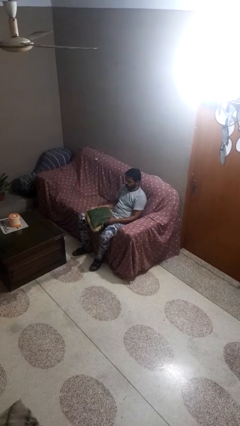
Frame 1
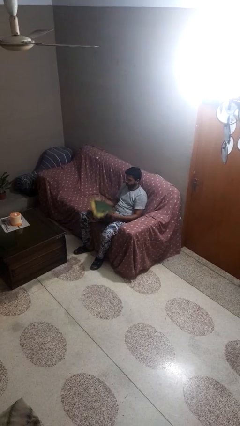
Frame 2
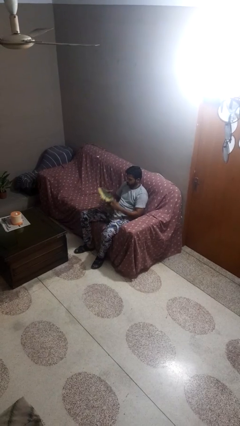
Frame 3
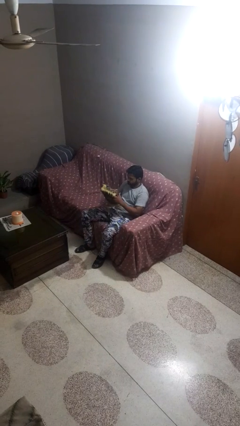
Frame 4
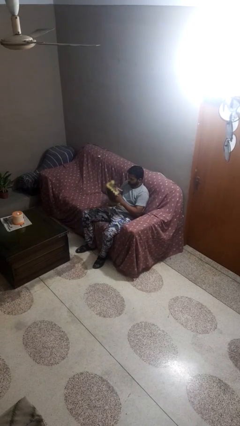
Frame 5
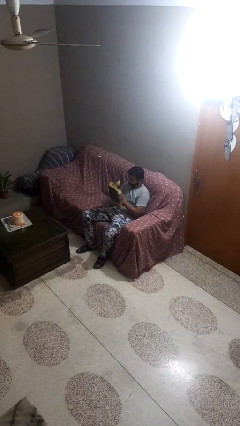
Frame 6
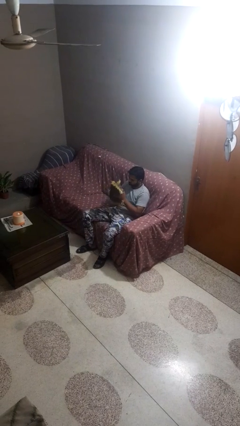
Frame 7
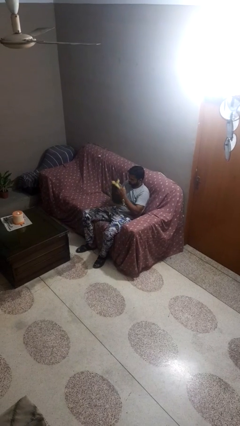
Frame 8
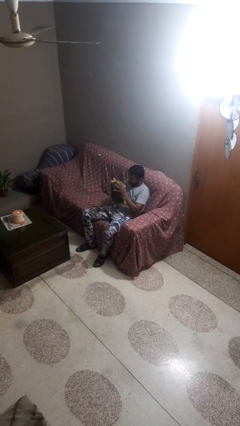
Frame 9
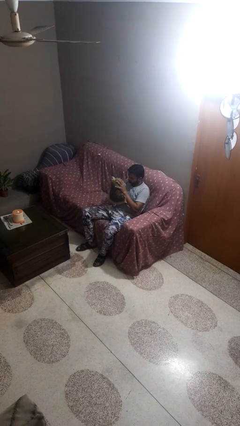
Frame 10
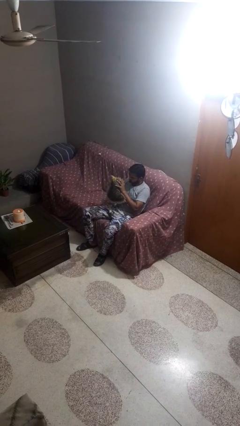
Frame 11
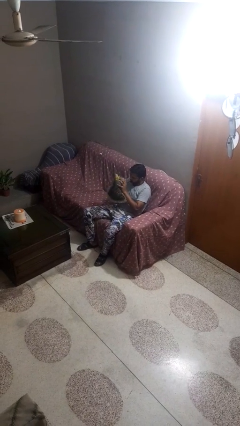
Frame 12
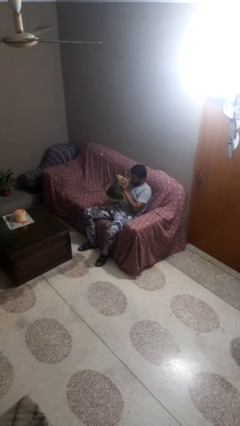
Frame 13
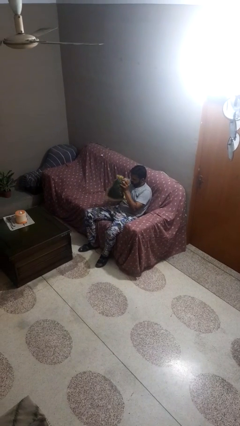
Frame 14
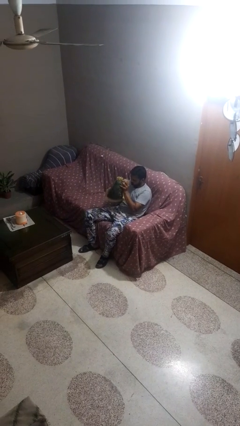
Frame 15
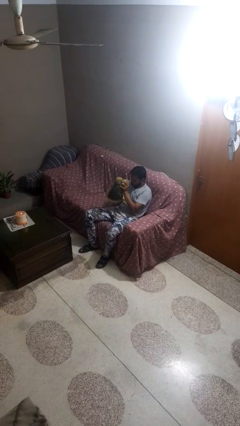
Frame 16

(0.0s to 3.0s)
person squeezes object

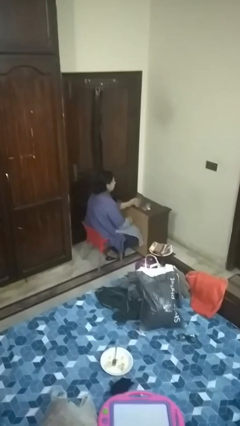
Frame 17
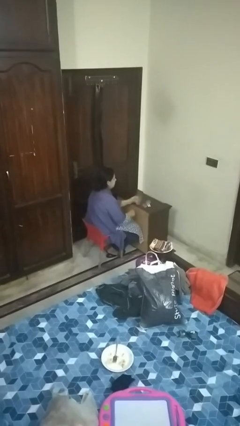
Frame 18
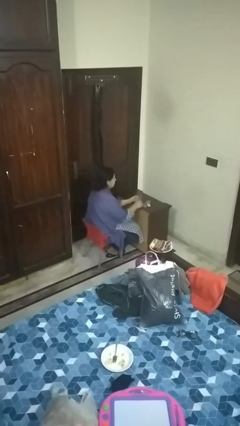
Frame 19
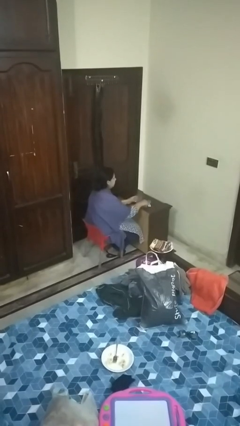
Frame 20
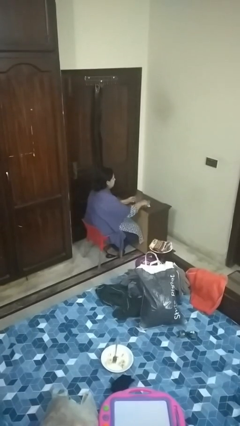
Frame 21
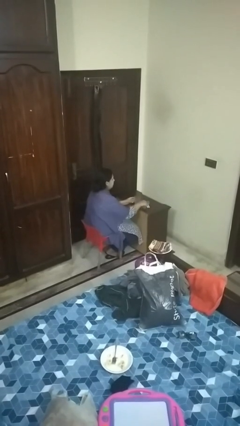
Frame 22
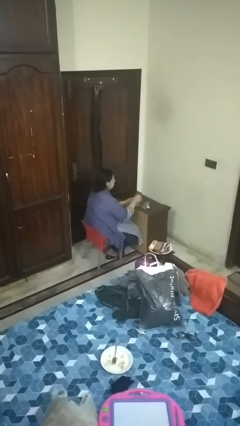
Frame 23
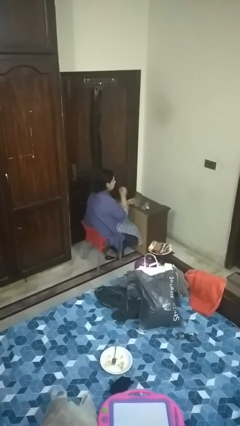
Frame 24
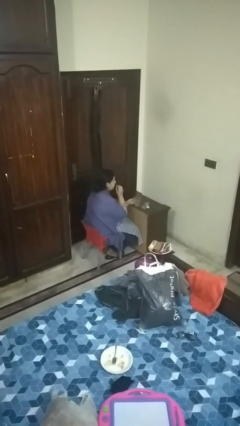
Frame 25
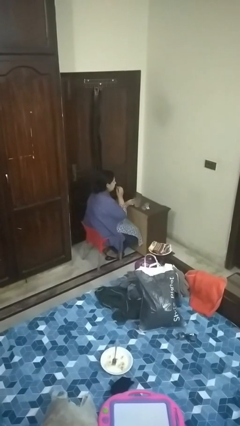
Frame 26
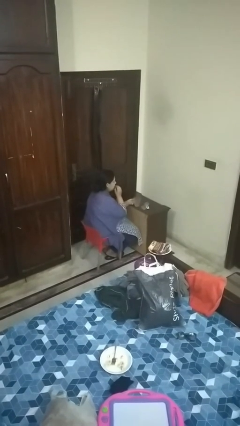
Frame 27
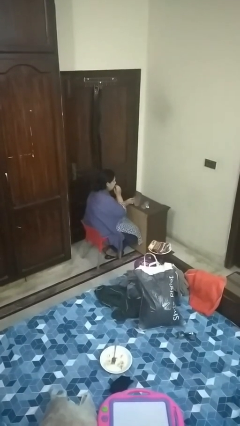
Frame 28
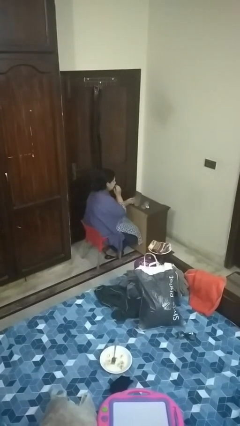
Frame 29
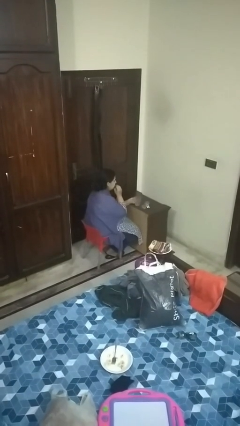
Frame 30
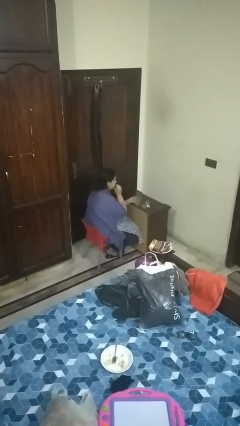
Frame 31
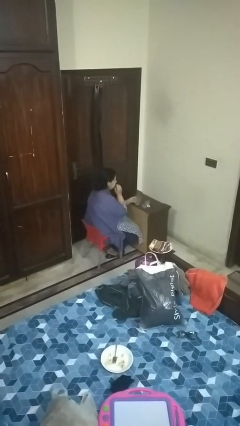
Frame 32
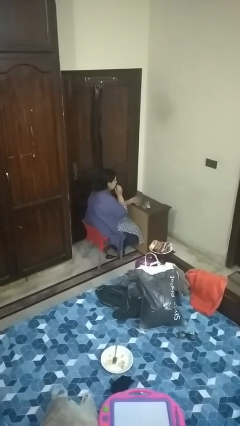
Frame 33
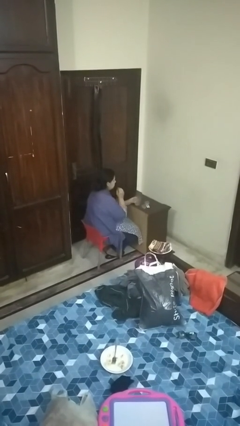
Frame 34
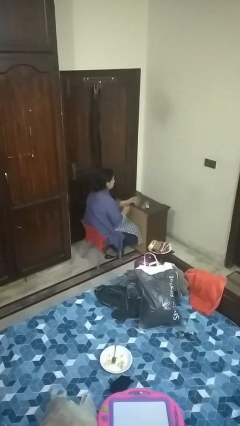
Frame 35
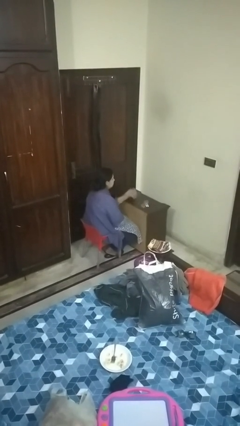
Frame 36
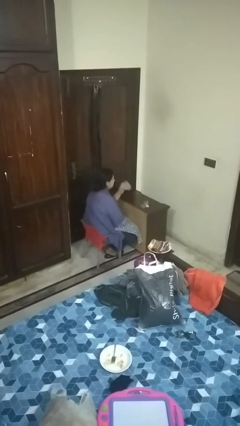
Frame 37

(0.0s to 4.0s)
person takes medicine pills

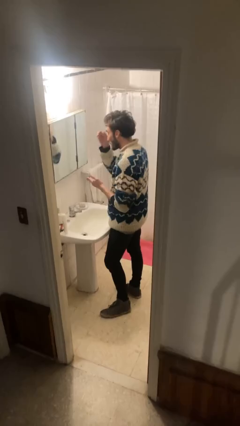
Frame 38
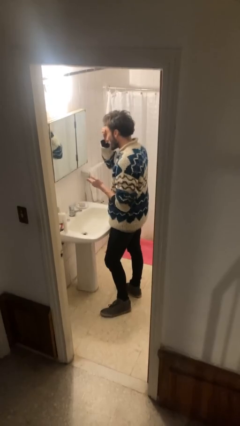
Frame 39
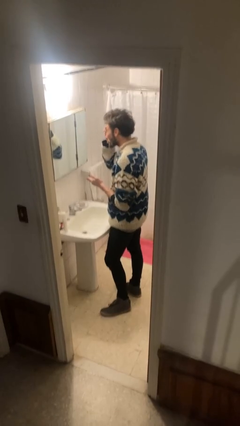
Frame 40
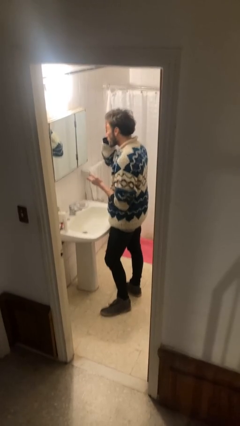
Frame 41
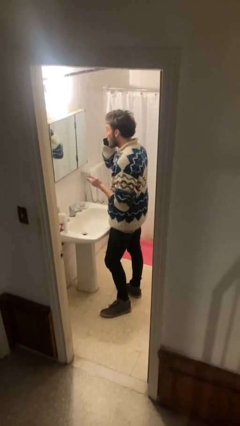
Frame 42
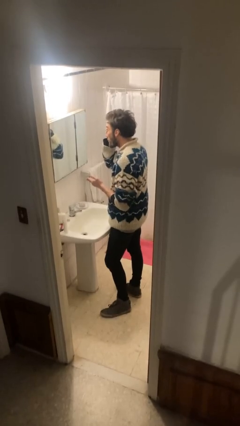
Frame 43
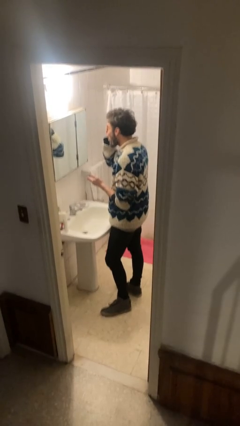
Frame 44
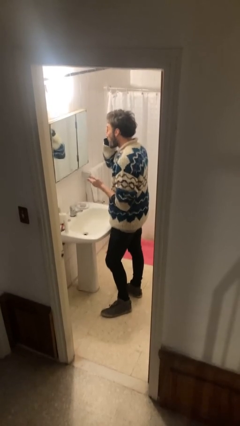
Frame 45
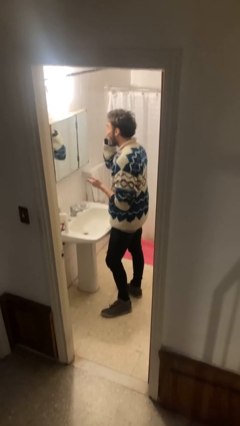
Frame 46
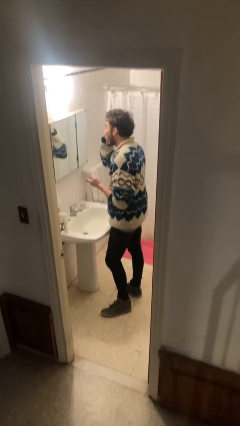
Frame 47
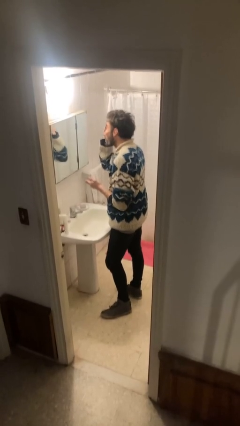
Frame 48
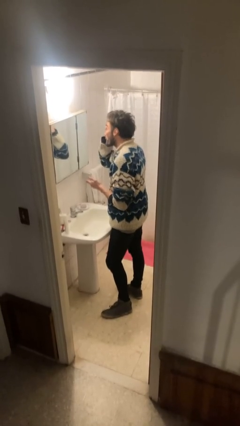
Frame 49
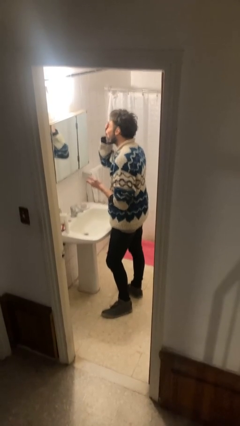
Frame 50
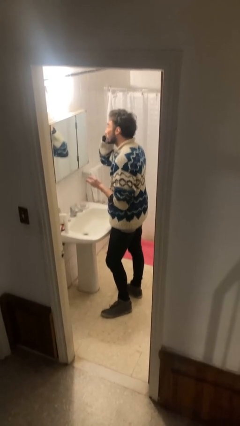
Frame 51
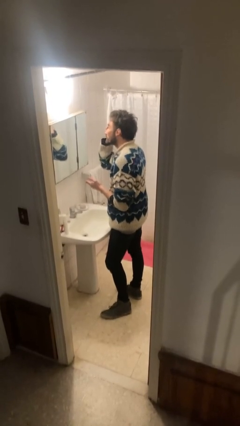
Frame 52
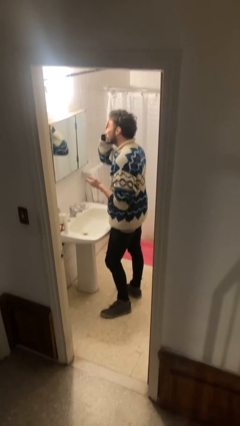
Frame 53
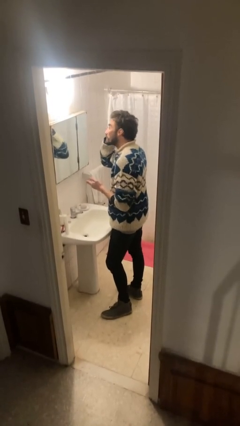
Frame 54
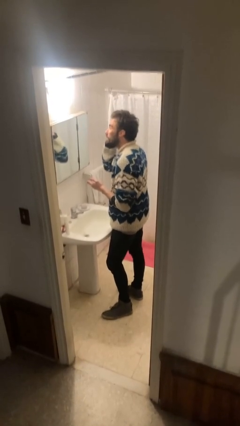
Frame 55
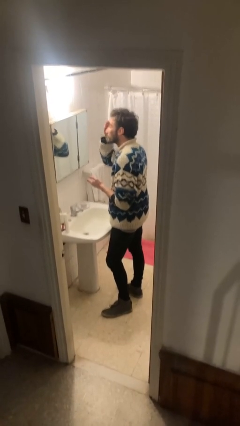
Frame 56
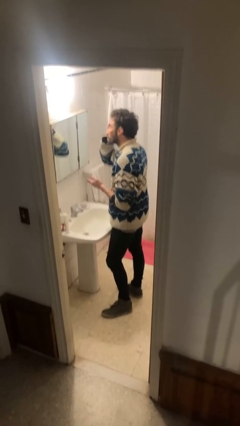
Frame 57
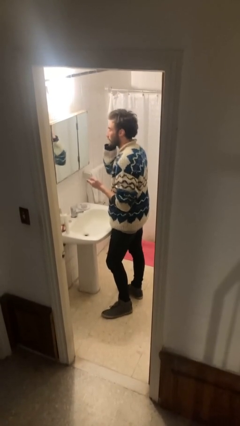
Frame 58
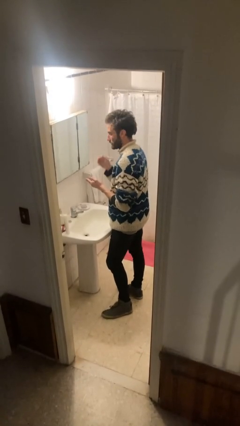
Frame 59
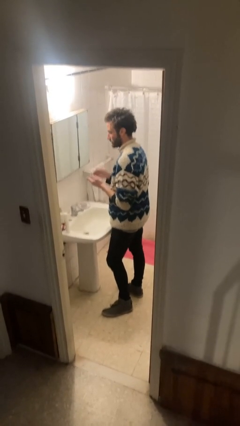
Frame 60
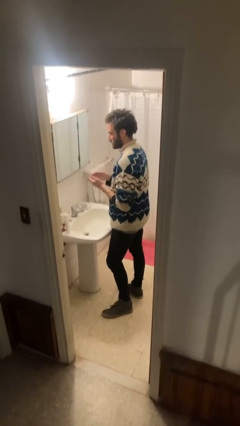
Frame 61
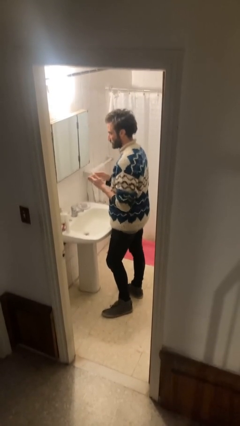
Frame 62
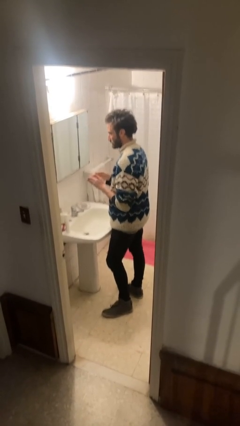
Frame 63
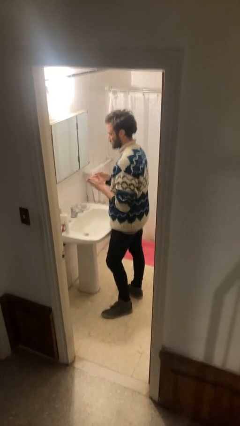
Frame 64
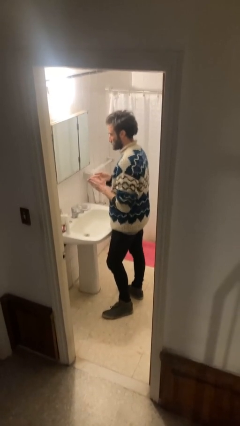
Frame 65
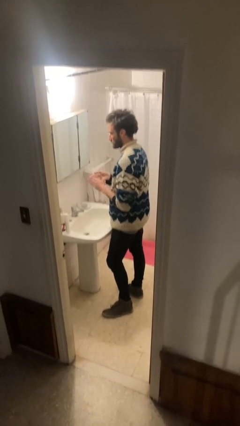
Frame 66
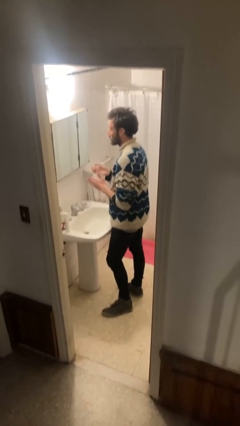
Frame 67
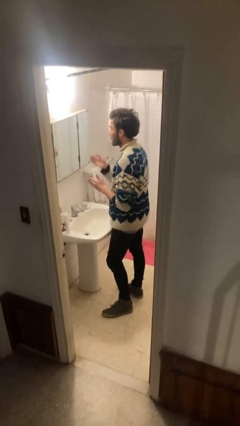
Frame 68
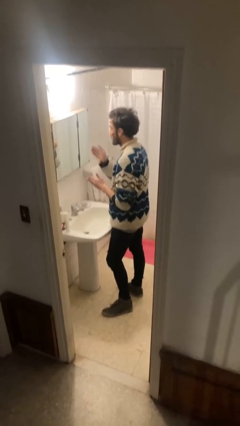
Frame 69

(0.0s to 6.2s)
person applies foundation makeup

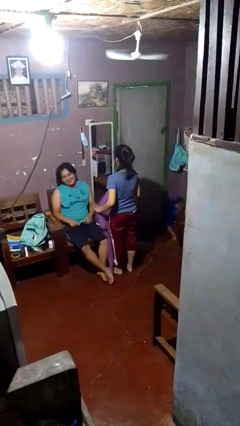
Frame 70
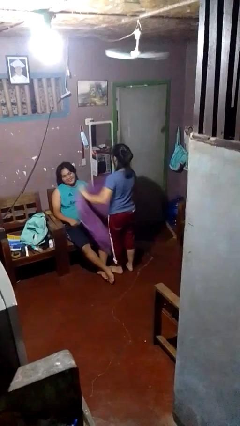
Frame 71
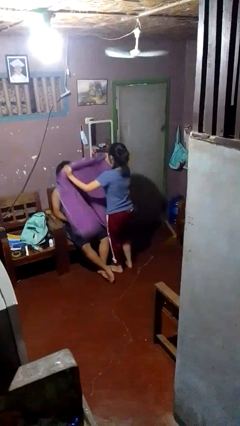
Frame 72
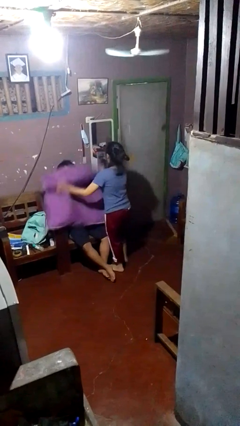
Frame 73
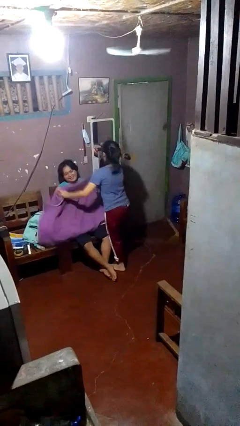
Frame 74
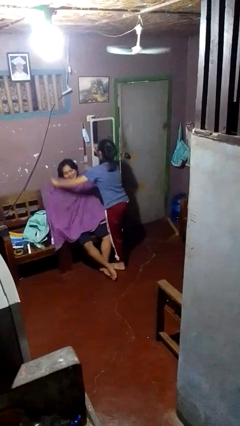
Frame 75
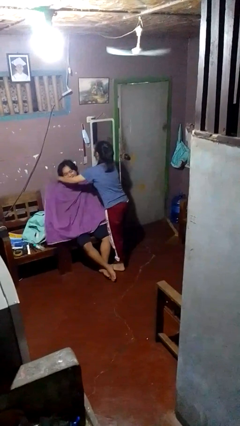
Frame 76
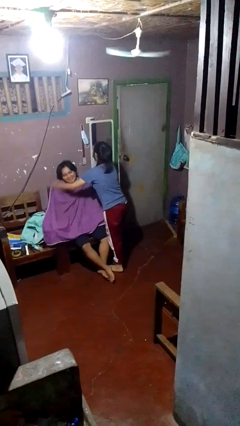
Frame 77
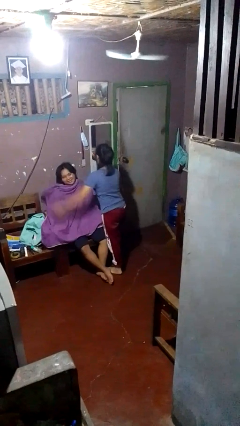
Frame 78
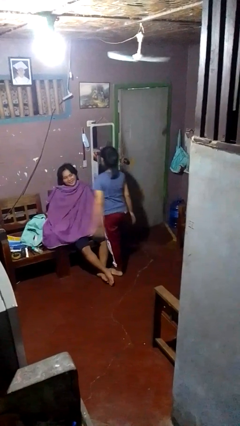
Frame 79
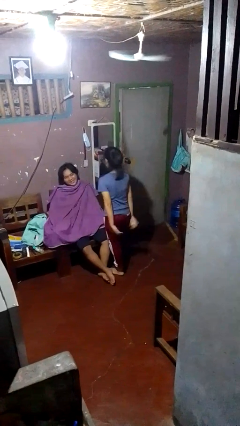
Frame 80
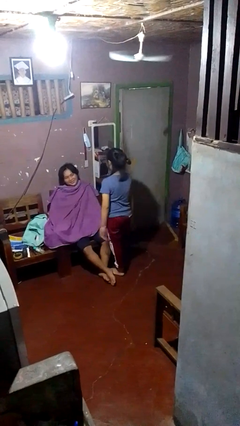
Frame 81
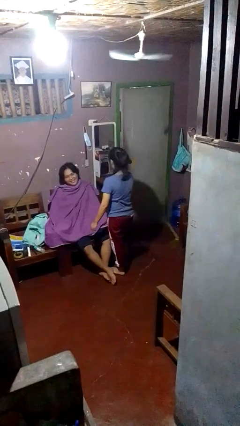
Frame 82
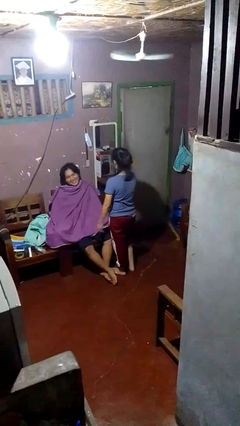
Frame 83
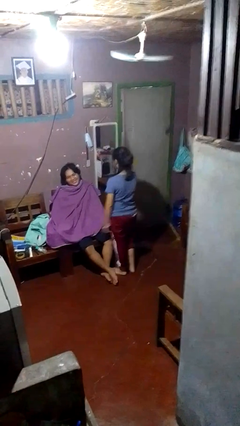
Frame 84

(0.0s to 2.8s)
person covers friend with blanket

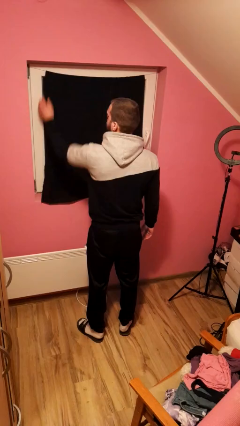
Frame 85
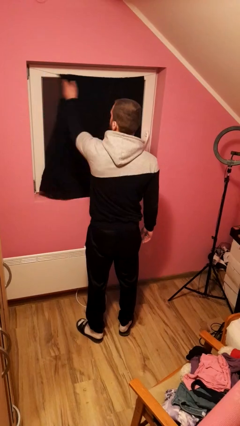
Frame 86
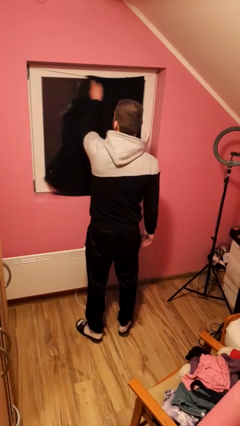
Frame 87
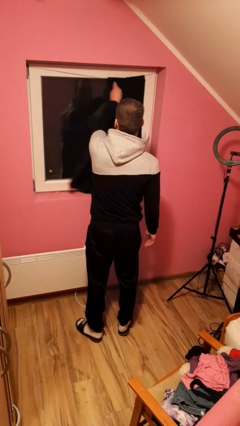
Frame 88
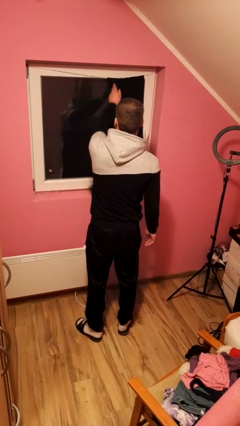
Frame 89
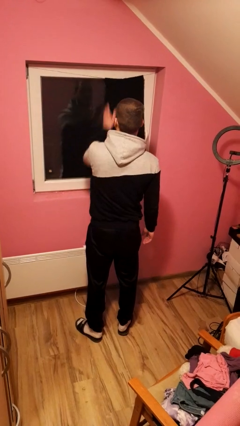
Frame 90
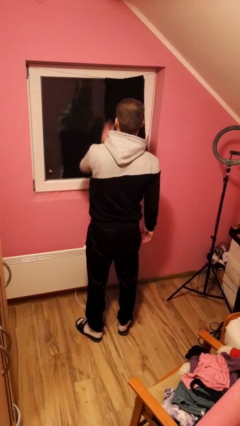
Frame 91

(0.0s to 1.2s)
person opens curtains

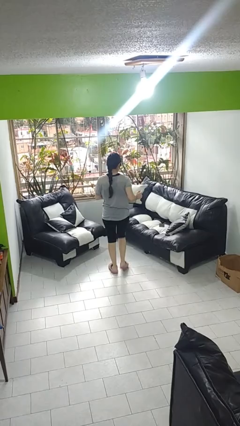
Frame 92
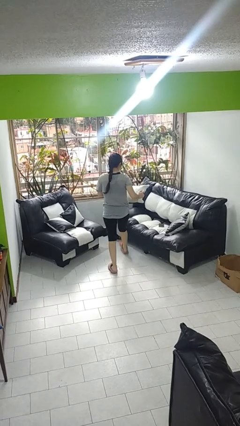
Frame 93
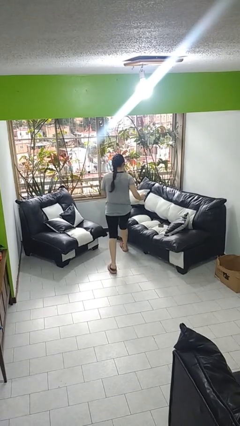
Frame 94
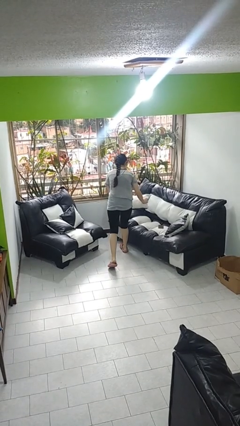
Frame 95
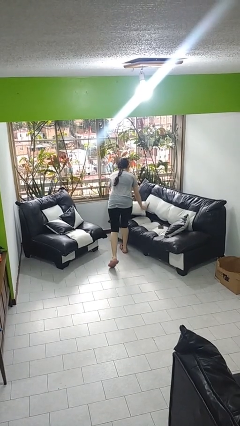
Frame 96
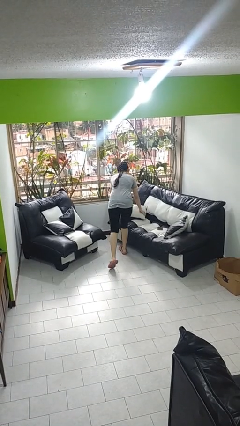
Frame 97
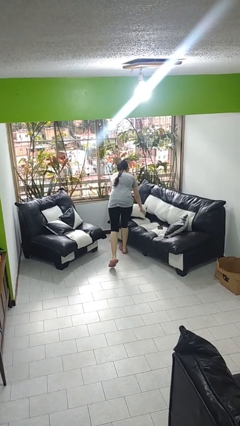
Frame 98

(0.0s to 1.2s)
person puts down object on couch
